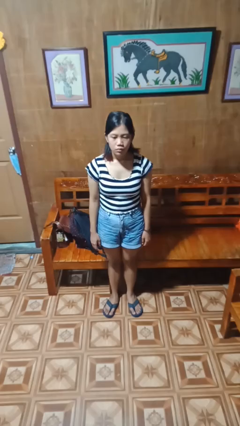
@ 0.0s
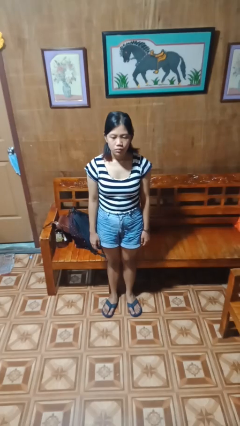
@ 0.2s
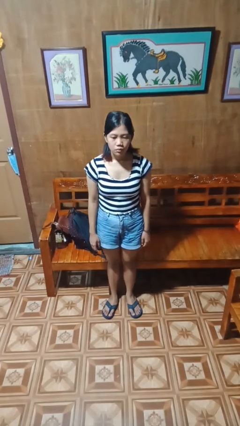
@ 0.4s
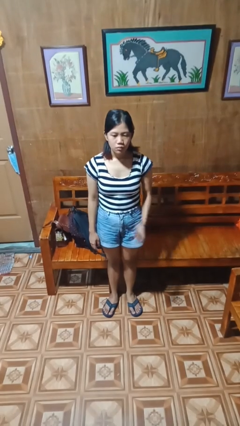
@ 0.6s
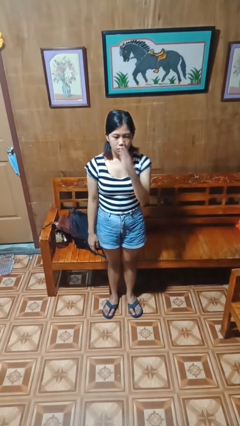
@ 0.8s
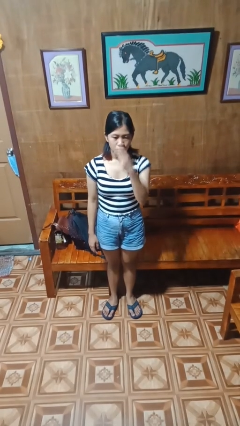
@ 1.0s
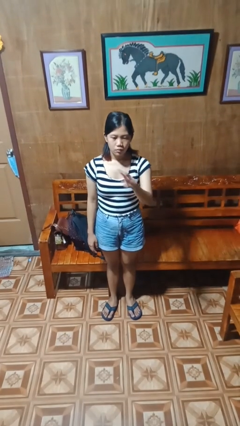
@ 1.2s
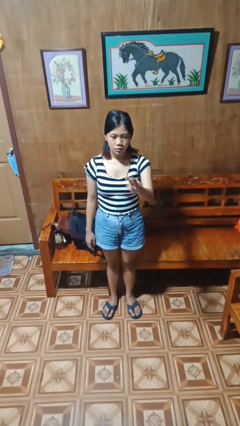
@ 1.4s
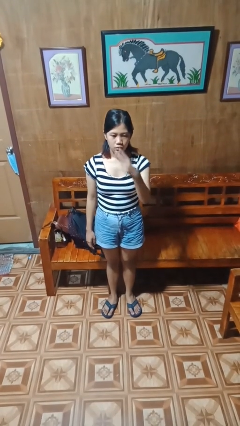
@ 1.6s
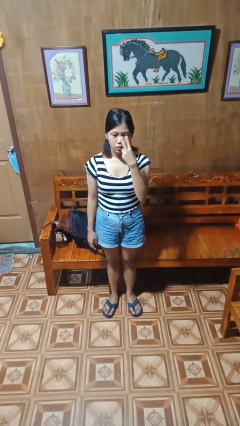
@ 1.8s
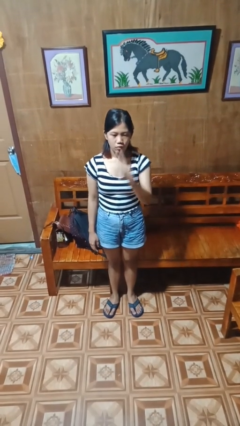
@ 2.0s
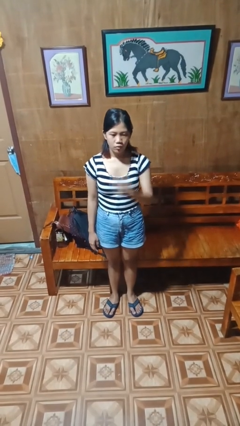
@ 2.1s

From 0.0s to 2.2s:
person gestures watch closely

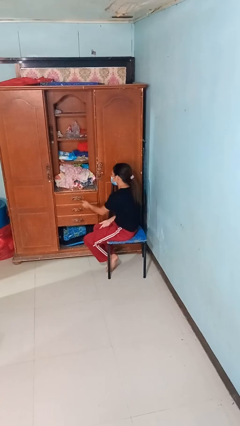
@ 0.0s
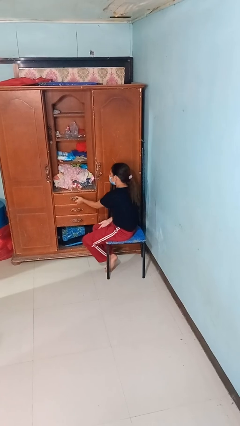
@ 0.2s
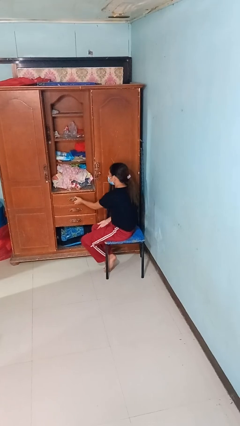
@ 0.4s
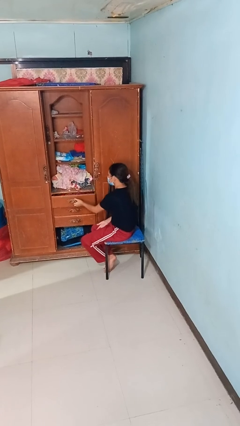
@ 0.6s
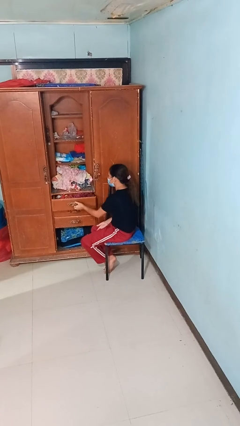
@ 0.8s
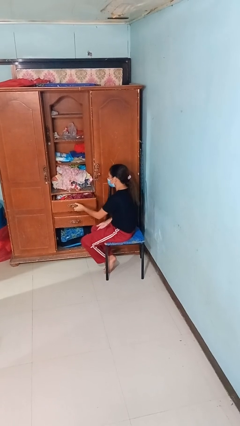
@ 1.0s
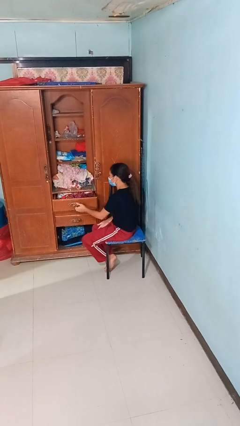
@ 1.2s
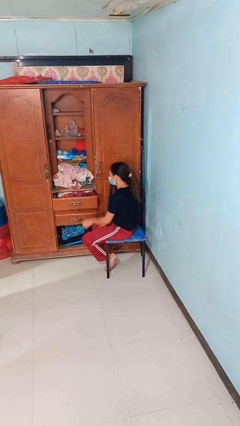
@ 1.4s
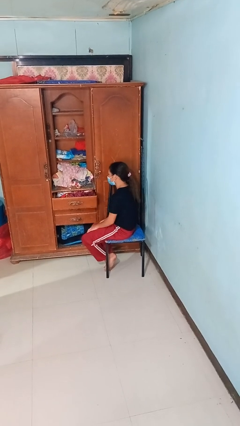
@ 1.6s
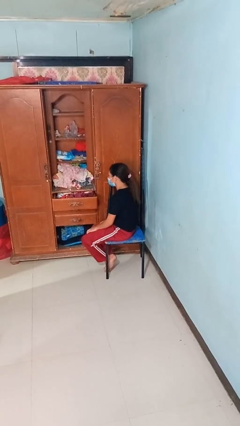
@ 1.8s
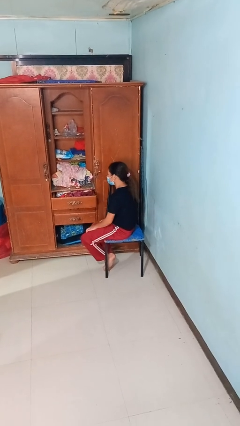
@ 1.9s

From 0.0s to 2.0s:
person opens dresser drawer

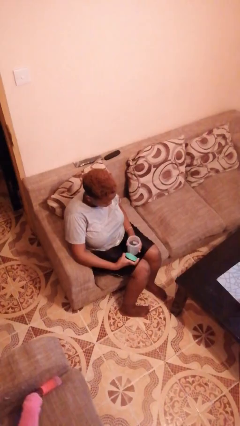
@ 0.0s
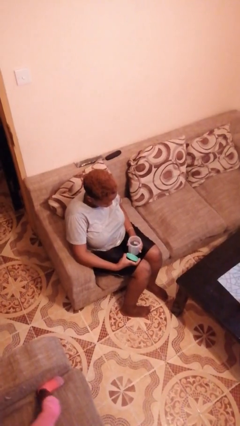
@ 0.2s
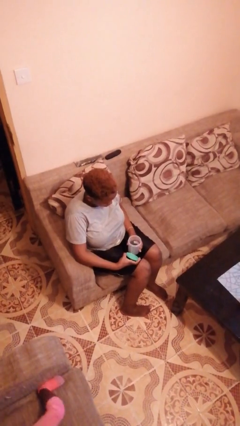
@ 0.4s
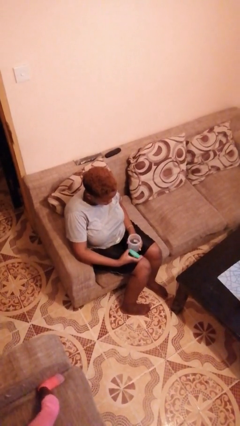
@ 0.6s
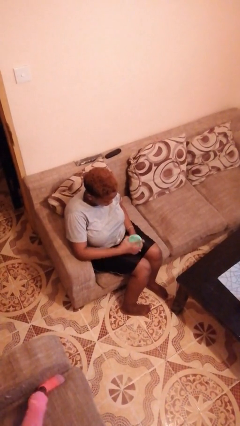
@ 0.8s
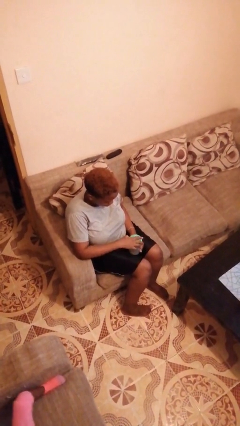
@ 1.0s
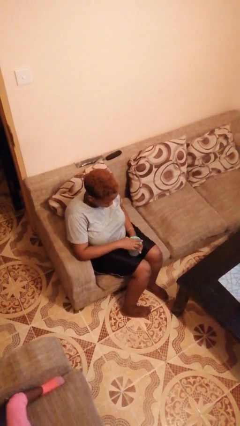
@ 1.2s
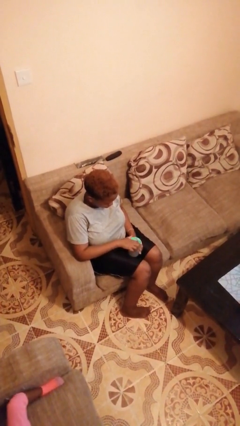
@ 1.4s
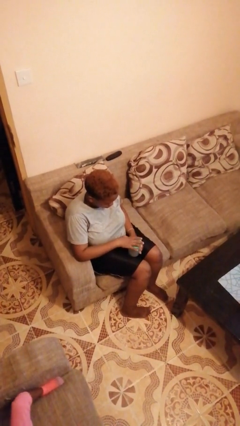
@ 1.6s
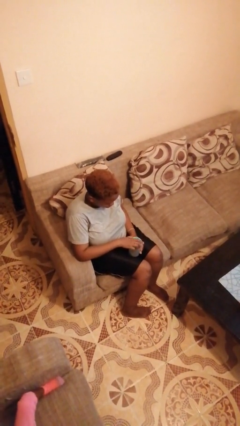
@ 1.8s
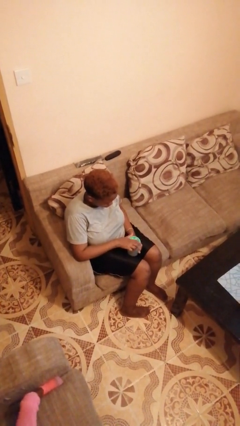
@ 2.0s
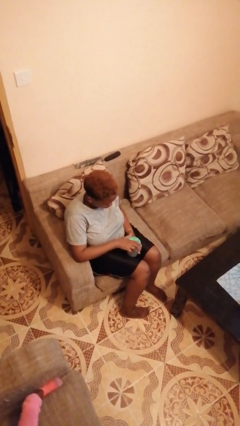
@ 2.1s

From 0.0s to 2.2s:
person closes jar

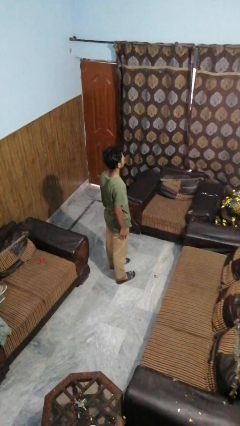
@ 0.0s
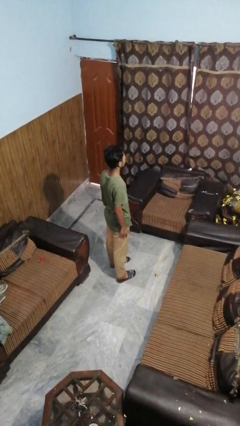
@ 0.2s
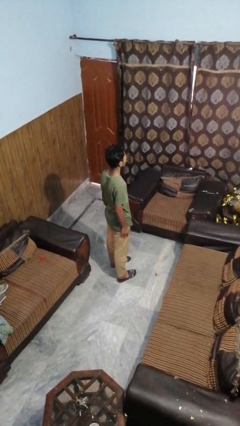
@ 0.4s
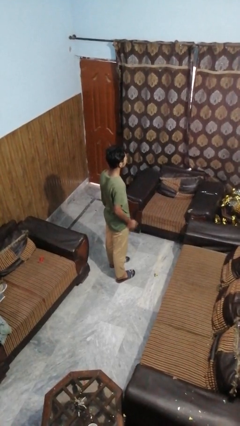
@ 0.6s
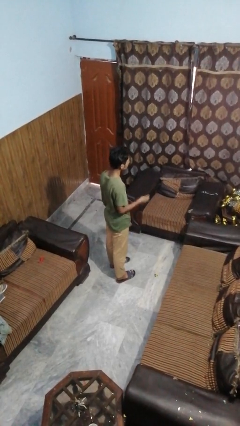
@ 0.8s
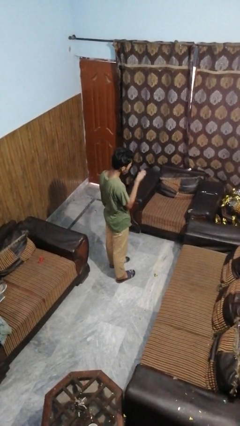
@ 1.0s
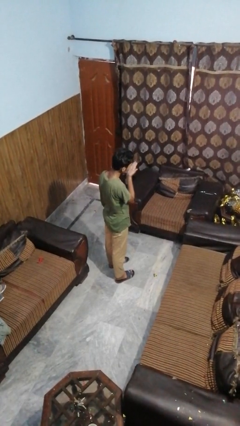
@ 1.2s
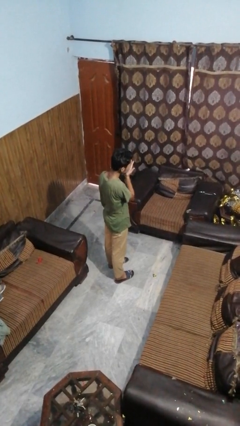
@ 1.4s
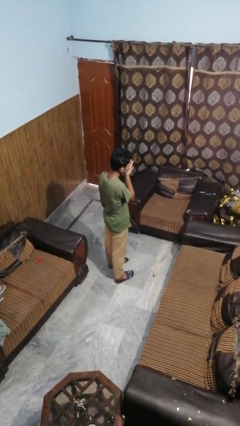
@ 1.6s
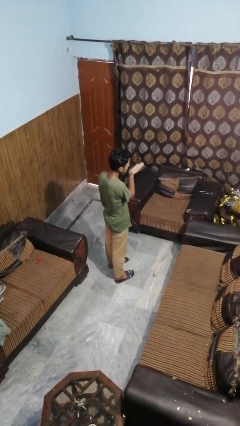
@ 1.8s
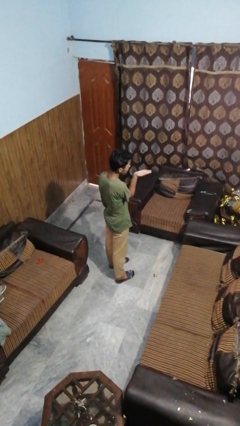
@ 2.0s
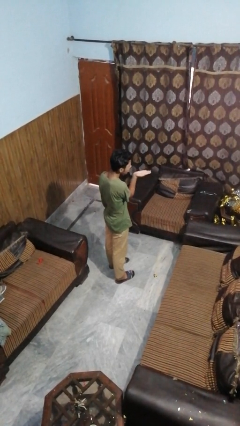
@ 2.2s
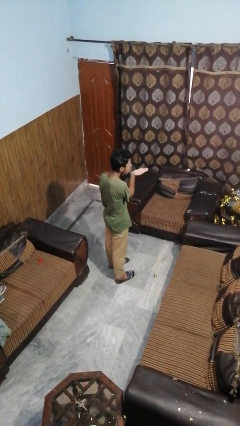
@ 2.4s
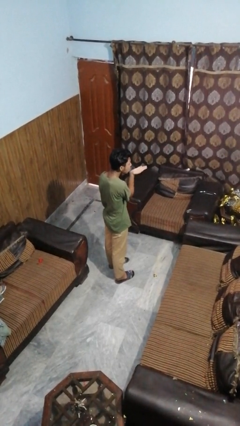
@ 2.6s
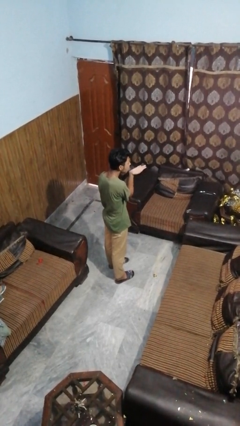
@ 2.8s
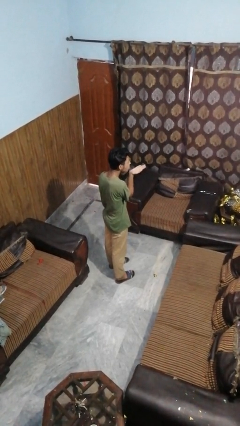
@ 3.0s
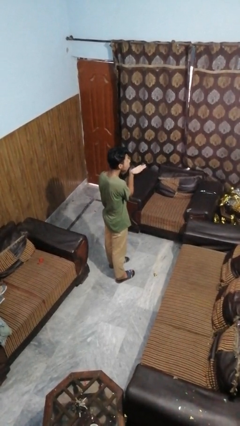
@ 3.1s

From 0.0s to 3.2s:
person gestures blow kiss

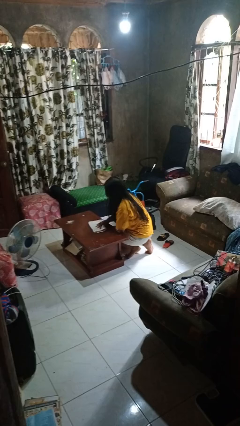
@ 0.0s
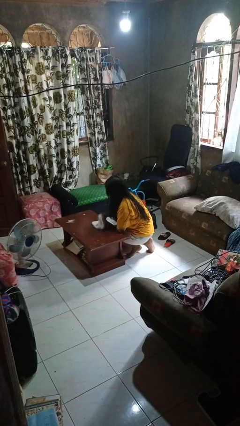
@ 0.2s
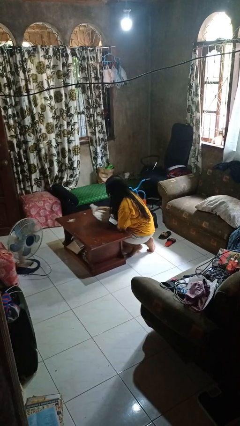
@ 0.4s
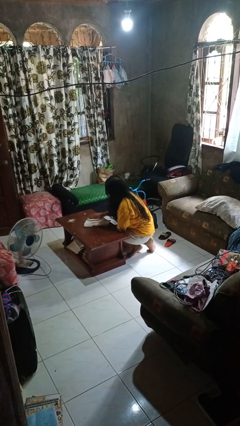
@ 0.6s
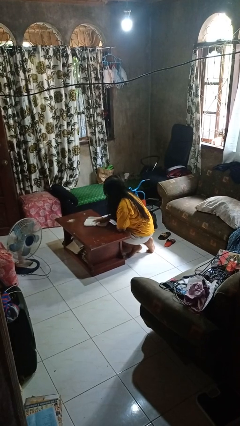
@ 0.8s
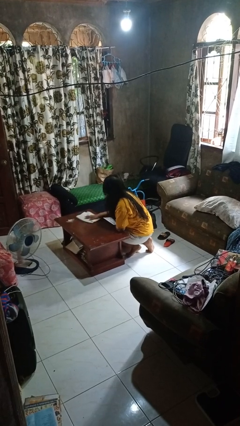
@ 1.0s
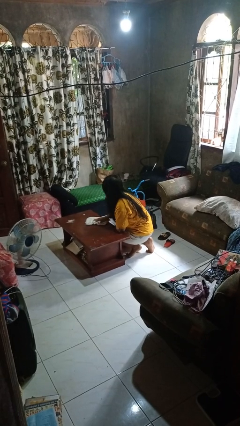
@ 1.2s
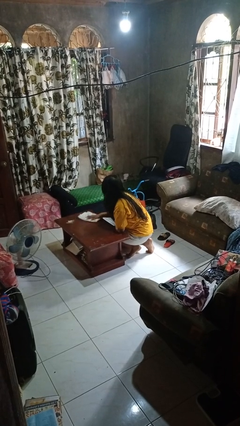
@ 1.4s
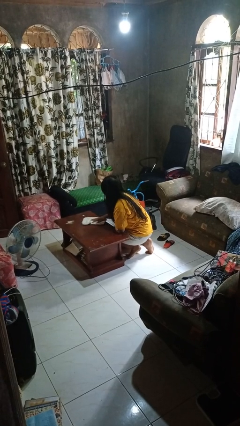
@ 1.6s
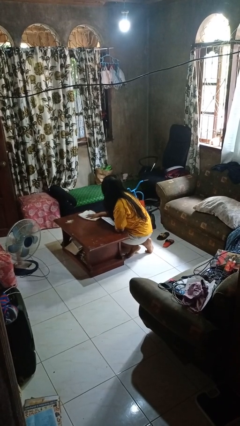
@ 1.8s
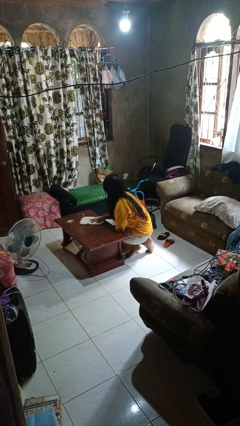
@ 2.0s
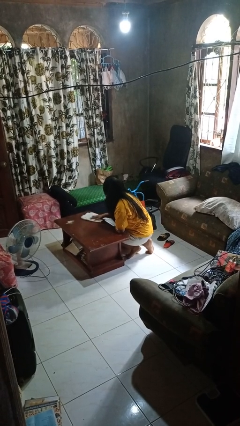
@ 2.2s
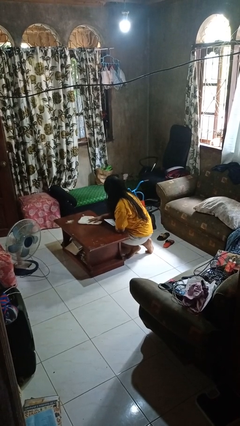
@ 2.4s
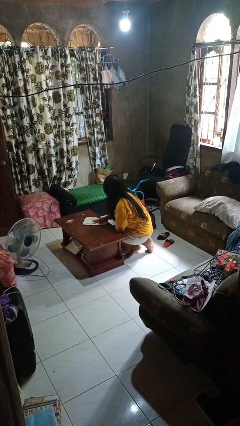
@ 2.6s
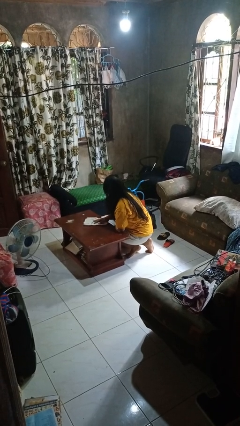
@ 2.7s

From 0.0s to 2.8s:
person cleans table with rag

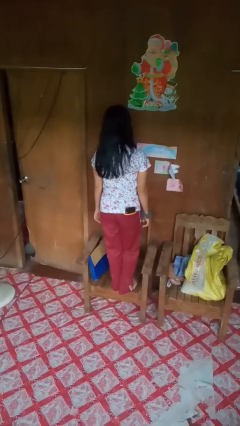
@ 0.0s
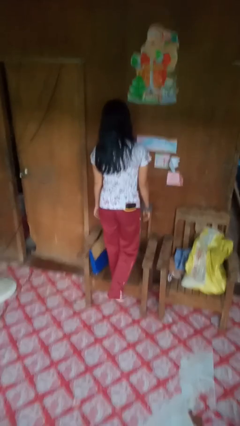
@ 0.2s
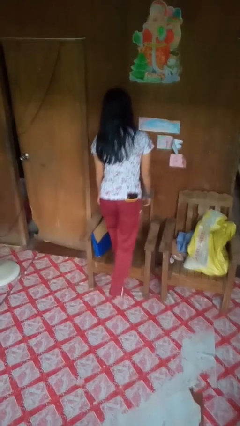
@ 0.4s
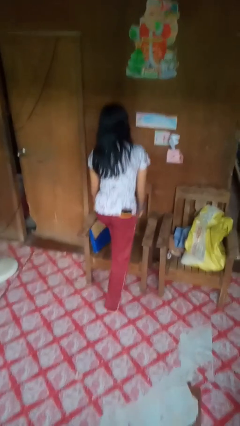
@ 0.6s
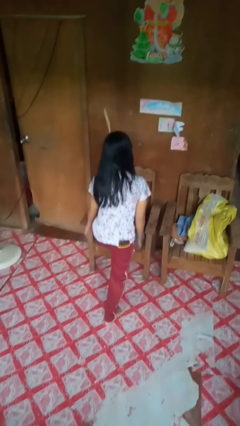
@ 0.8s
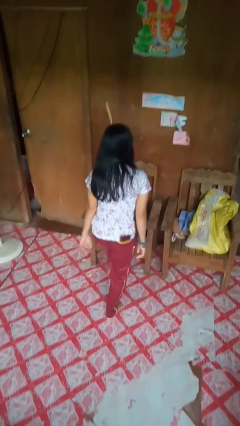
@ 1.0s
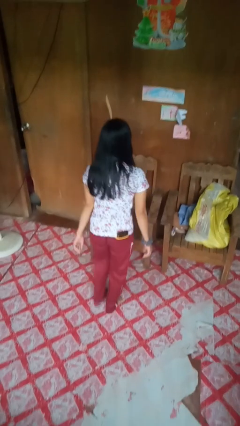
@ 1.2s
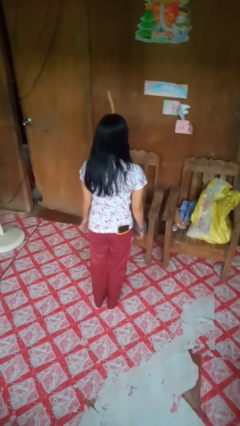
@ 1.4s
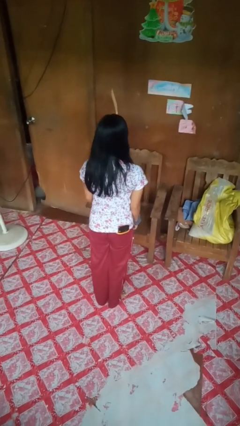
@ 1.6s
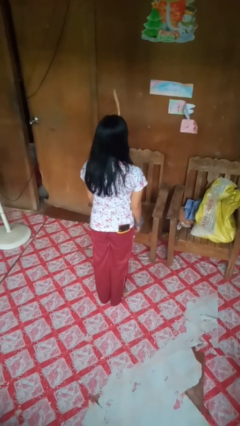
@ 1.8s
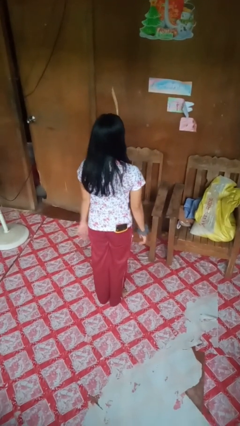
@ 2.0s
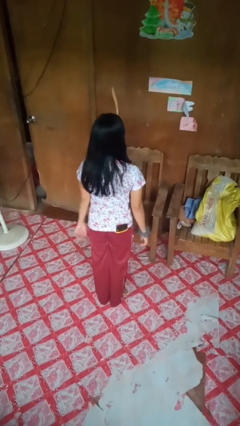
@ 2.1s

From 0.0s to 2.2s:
person climbs off chair

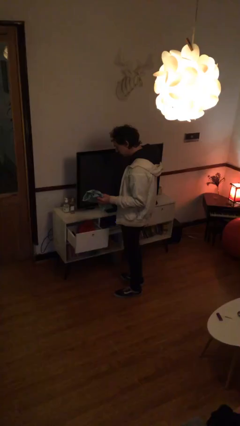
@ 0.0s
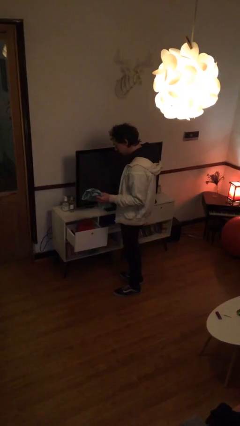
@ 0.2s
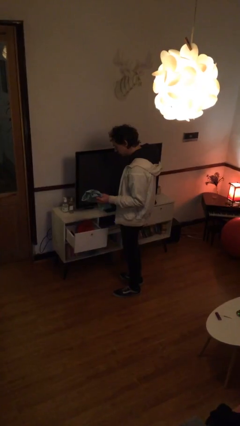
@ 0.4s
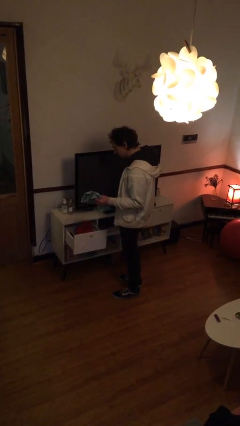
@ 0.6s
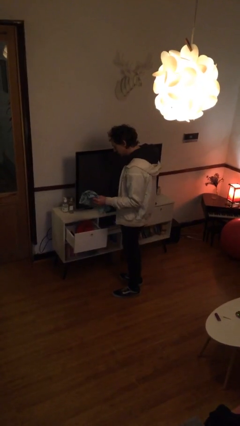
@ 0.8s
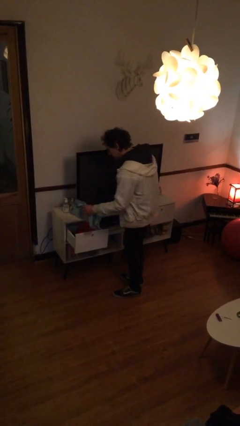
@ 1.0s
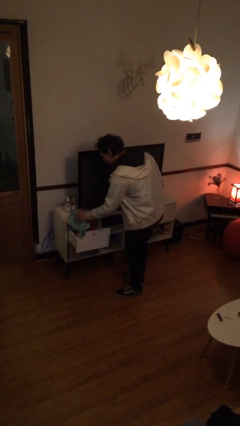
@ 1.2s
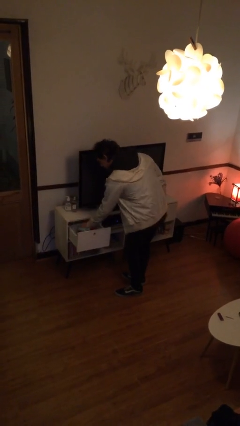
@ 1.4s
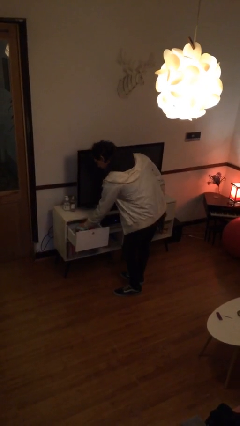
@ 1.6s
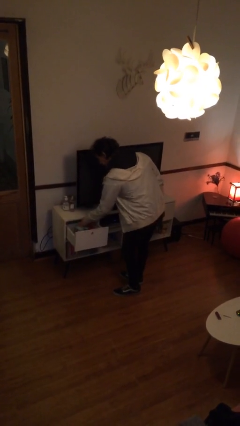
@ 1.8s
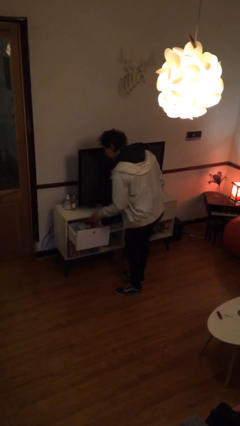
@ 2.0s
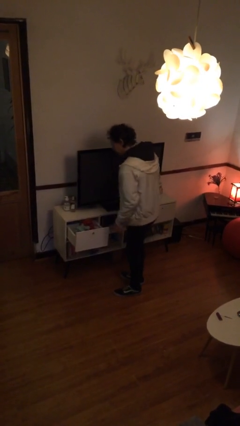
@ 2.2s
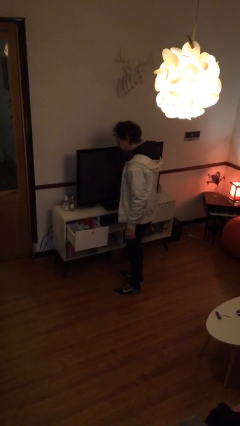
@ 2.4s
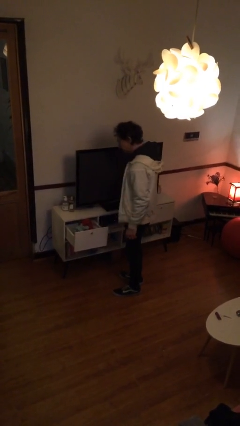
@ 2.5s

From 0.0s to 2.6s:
person puts clothes into dresser
